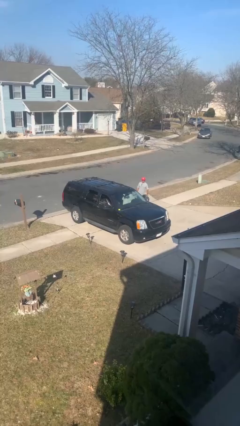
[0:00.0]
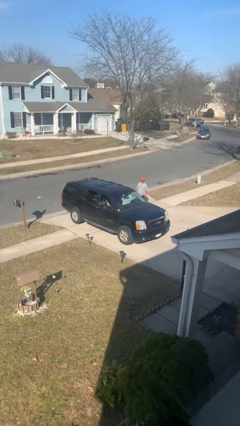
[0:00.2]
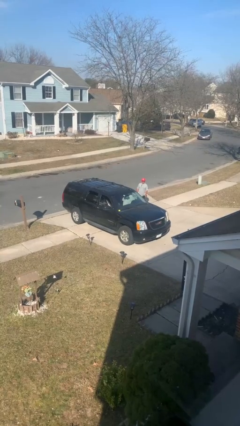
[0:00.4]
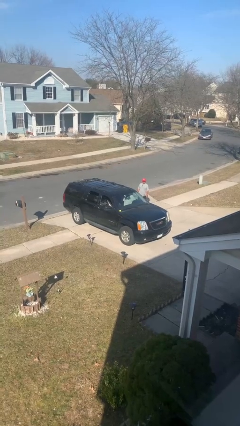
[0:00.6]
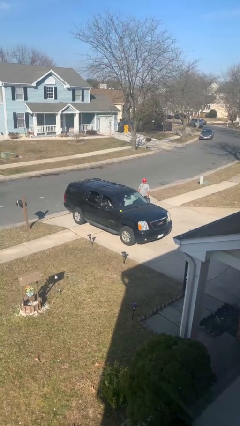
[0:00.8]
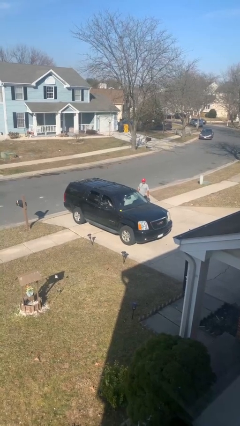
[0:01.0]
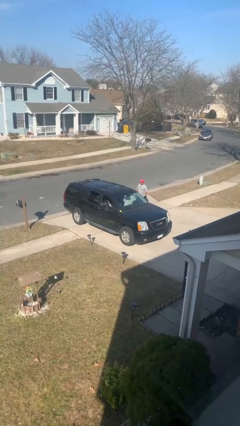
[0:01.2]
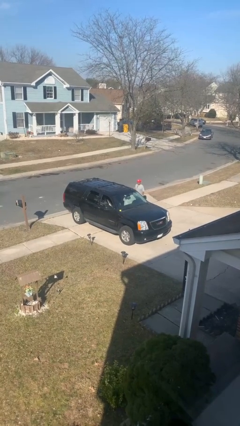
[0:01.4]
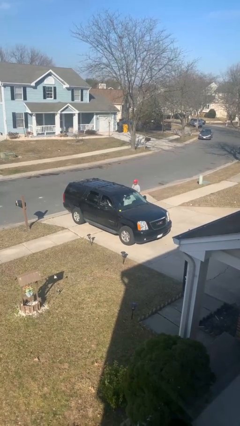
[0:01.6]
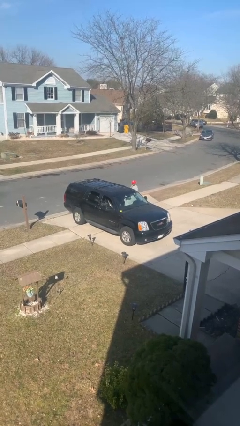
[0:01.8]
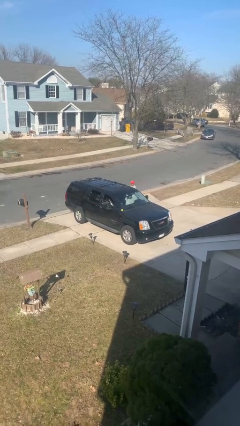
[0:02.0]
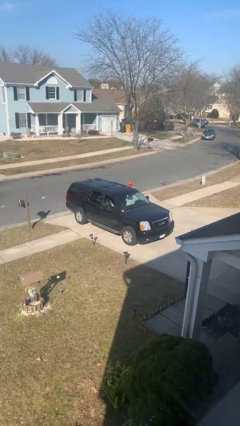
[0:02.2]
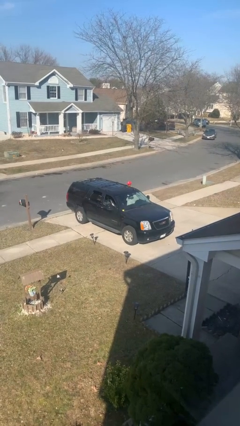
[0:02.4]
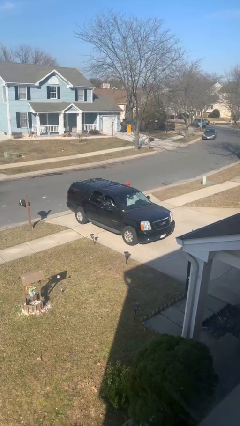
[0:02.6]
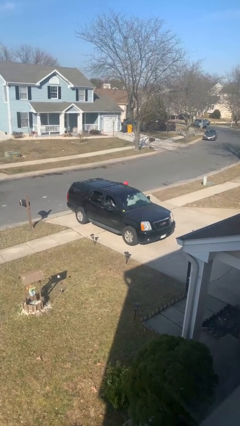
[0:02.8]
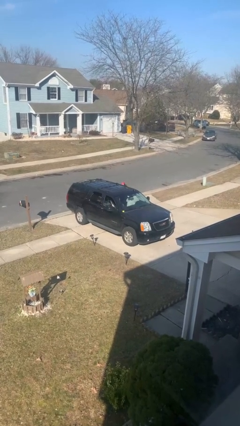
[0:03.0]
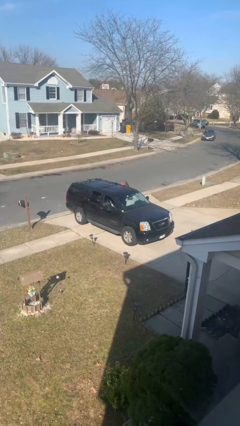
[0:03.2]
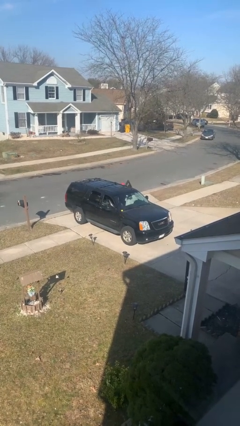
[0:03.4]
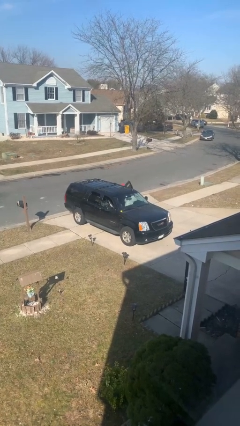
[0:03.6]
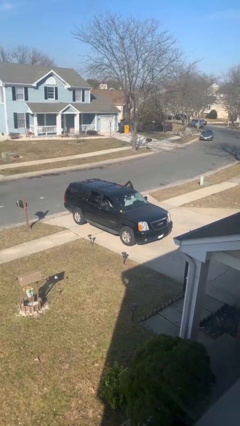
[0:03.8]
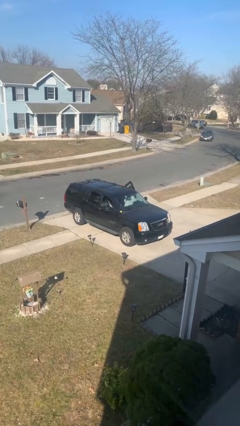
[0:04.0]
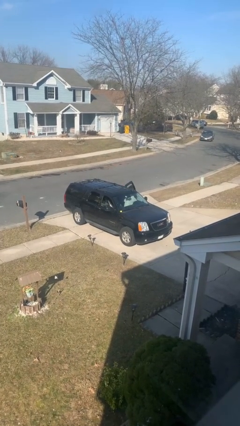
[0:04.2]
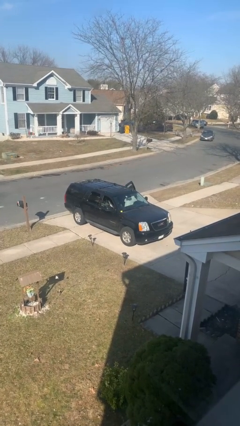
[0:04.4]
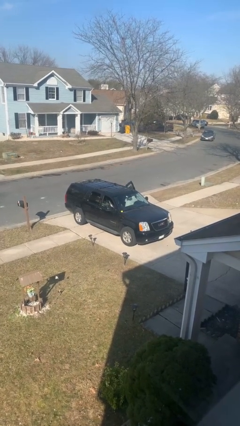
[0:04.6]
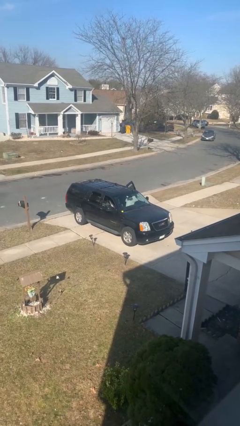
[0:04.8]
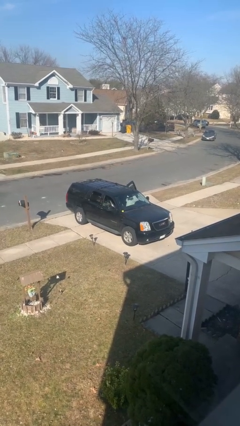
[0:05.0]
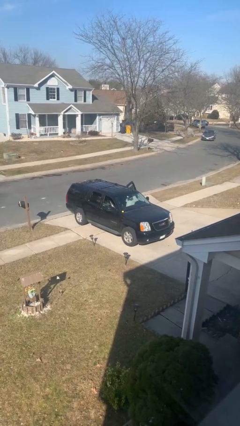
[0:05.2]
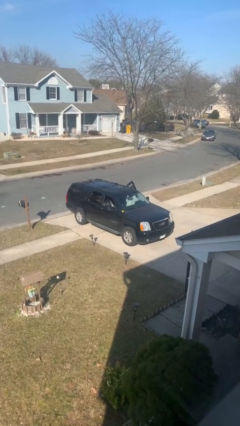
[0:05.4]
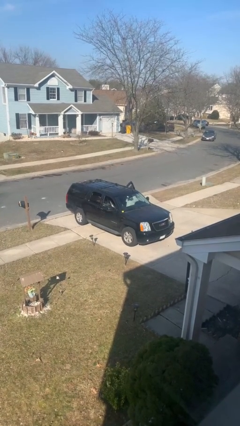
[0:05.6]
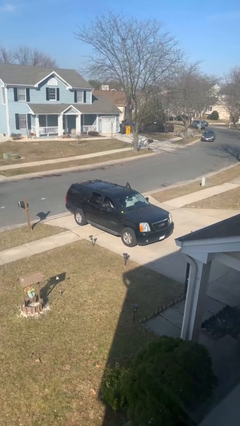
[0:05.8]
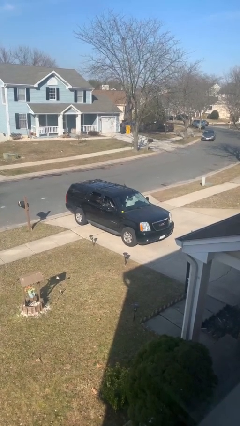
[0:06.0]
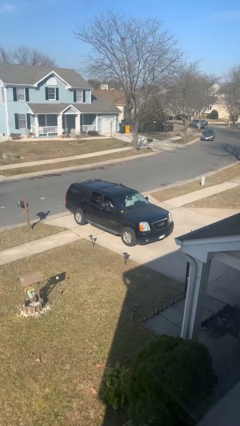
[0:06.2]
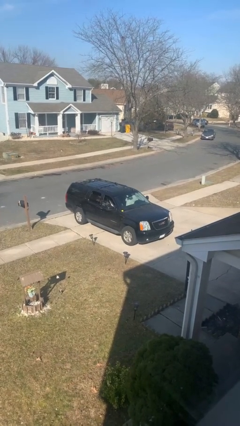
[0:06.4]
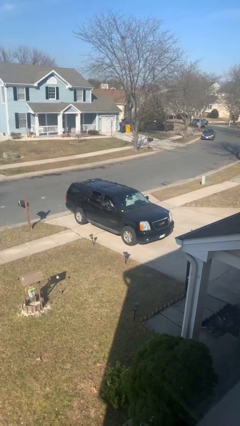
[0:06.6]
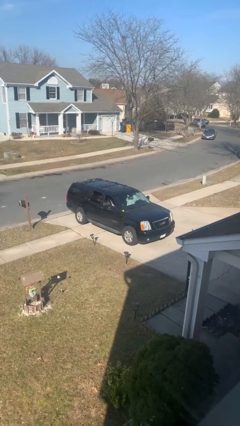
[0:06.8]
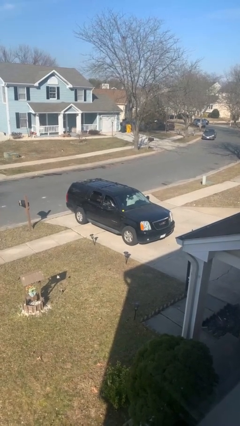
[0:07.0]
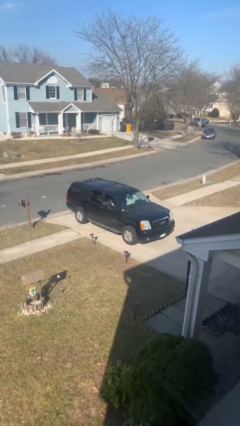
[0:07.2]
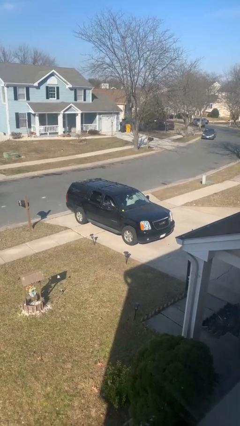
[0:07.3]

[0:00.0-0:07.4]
car picks up person

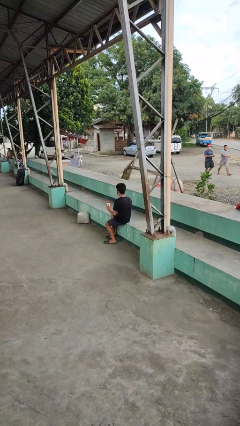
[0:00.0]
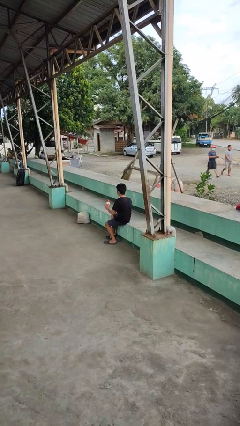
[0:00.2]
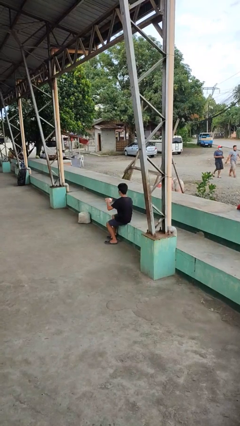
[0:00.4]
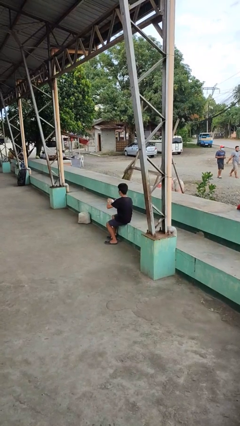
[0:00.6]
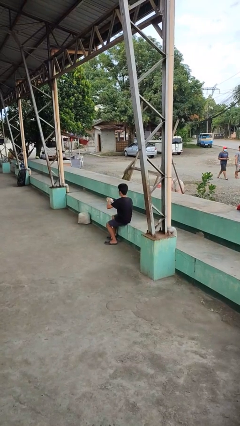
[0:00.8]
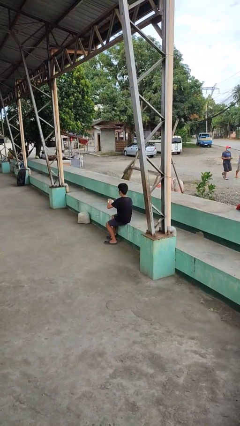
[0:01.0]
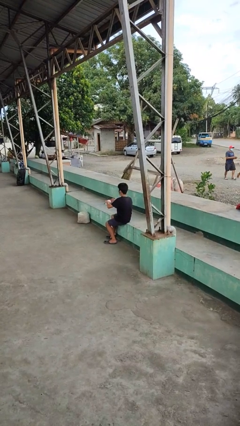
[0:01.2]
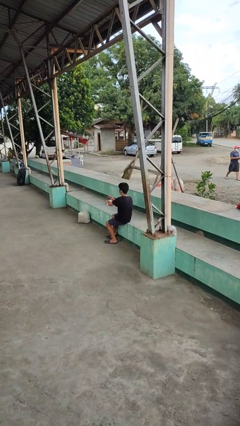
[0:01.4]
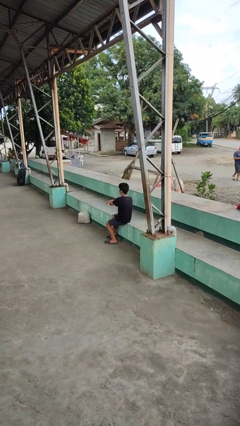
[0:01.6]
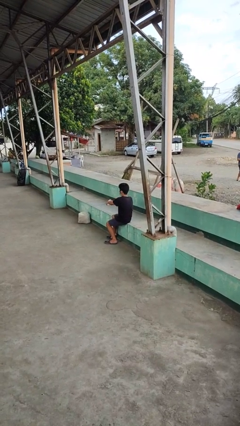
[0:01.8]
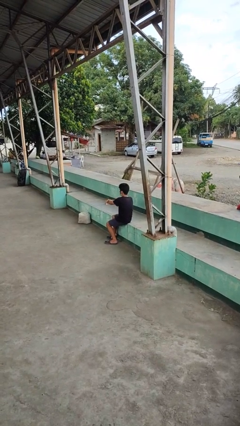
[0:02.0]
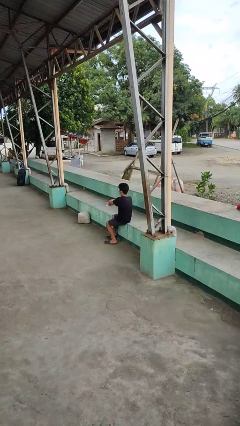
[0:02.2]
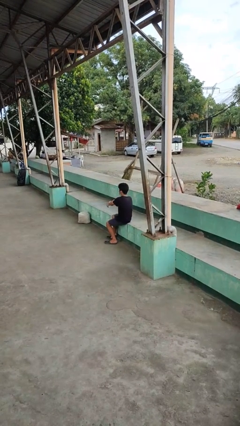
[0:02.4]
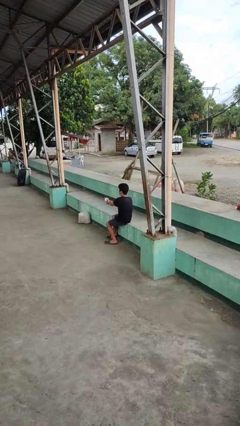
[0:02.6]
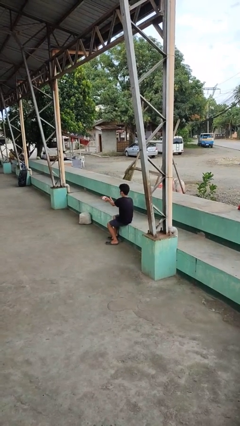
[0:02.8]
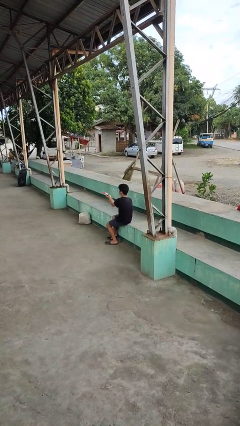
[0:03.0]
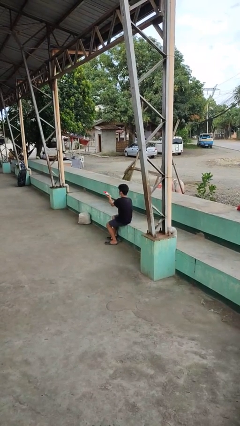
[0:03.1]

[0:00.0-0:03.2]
person applies sunscreen

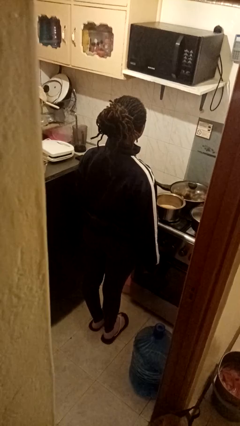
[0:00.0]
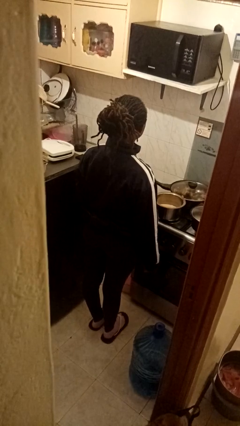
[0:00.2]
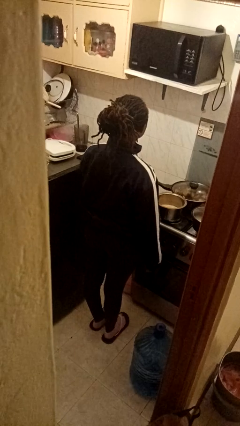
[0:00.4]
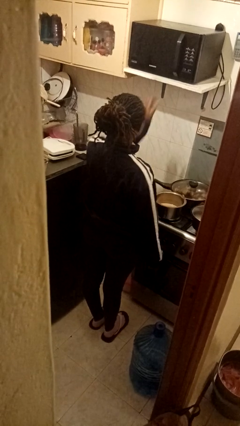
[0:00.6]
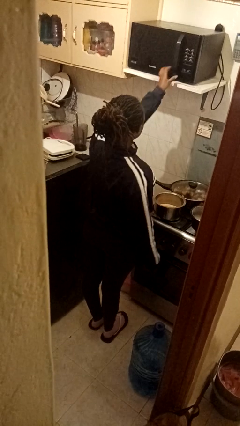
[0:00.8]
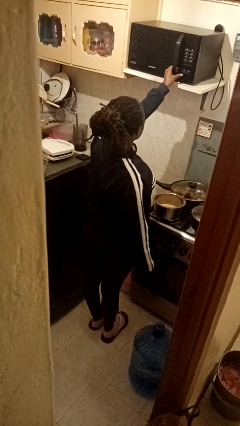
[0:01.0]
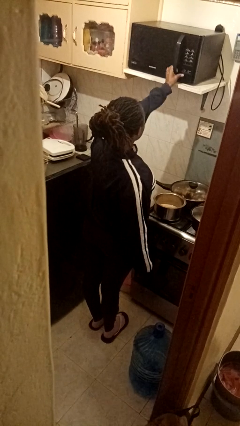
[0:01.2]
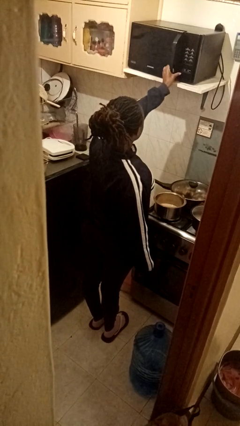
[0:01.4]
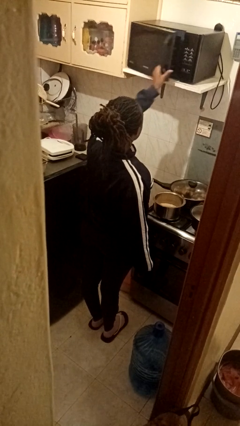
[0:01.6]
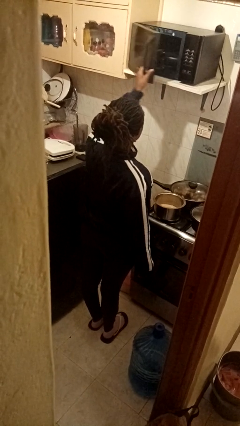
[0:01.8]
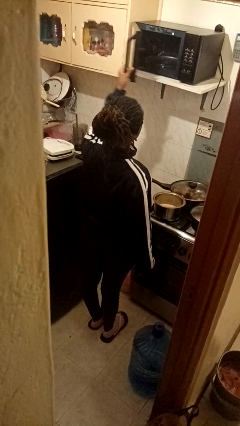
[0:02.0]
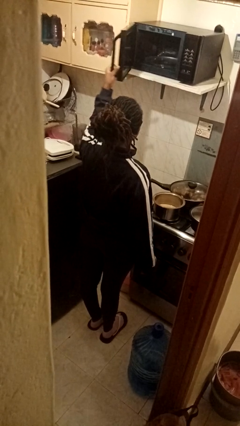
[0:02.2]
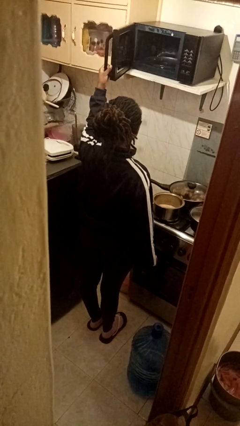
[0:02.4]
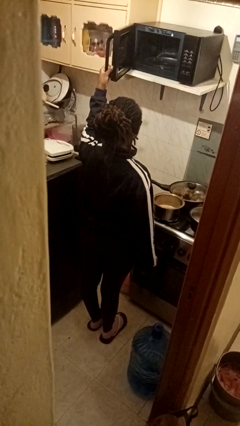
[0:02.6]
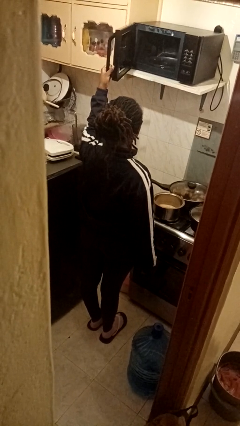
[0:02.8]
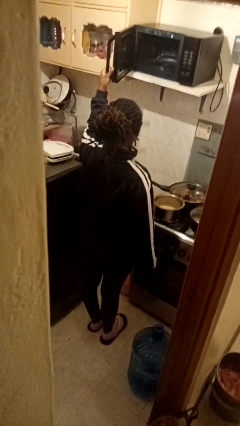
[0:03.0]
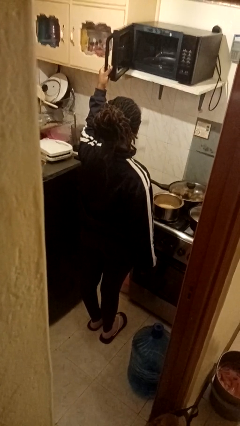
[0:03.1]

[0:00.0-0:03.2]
person opens microwave

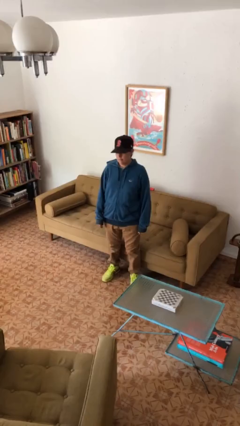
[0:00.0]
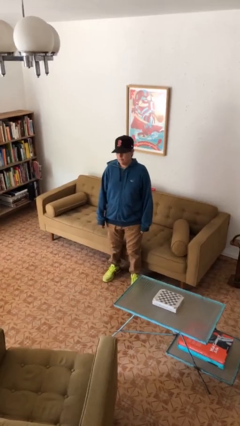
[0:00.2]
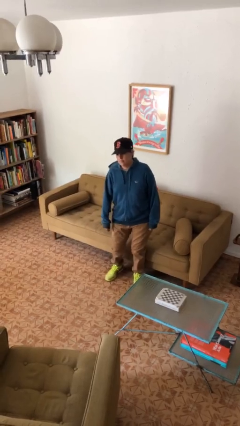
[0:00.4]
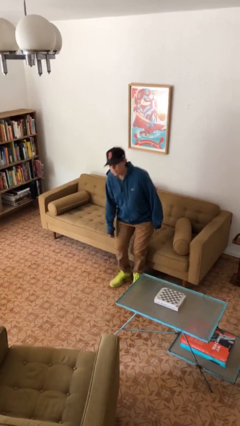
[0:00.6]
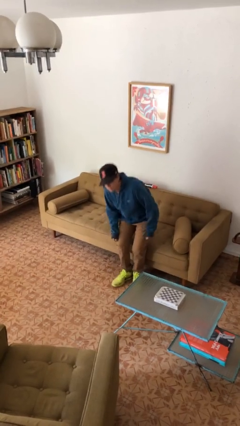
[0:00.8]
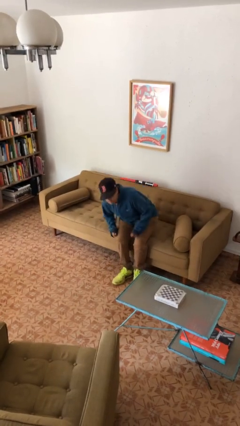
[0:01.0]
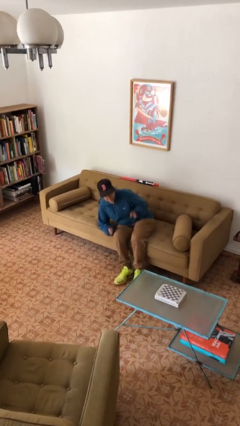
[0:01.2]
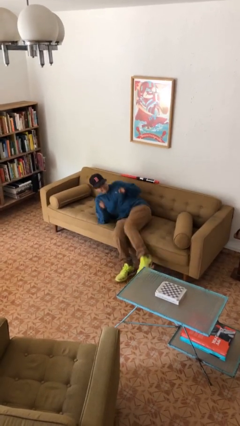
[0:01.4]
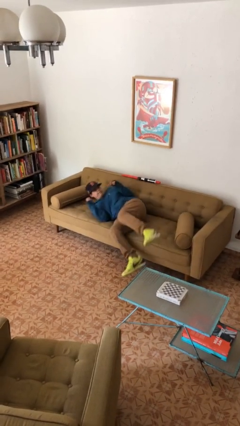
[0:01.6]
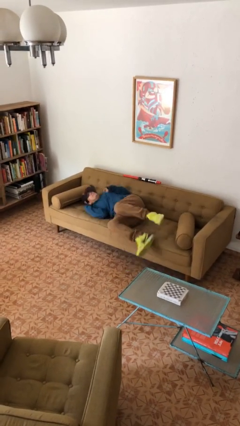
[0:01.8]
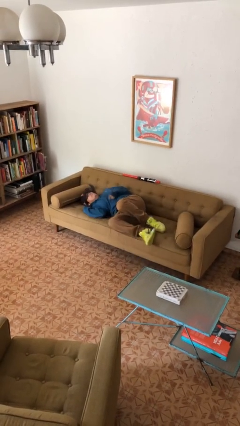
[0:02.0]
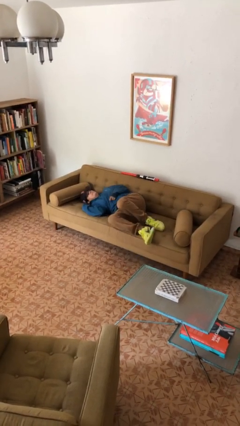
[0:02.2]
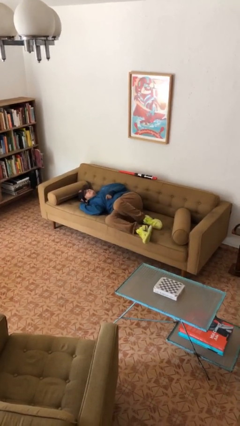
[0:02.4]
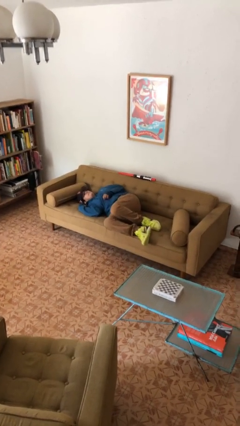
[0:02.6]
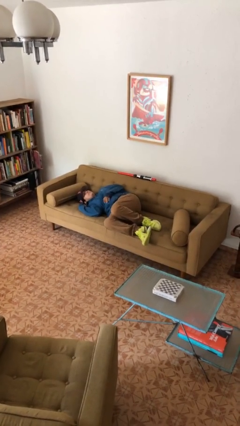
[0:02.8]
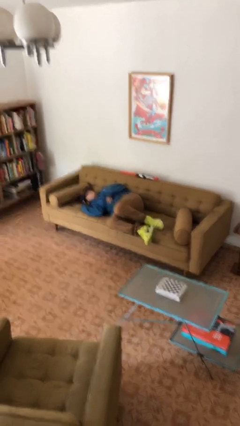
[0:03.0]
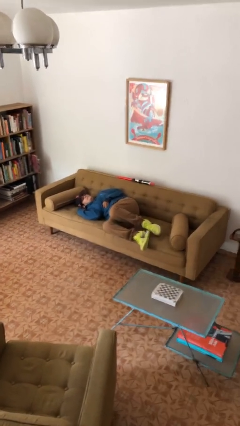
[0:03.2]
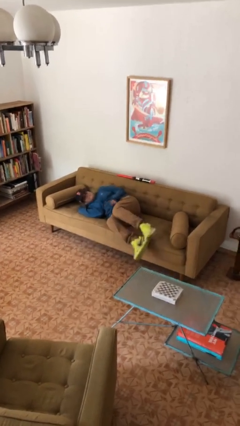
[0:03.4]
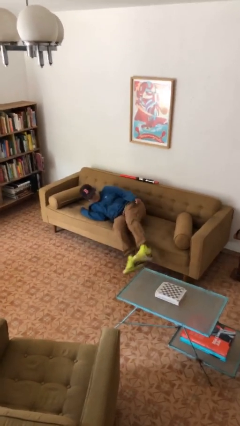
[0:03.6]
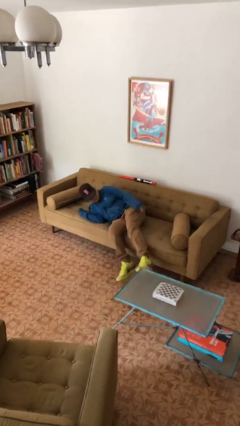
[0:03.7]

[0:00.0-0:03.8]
person lies down on couch
